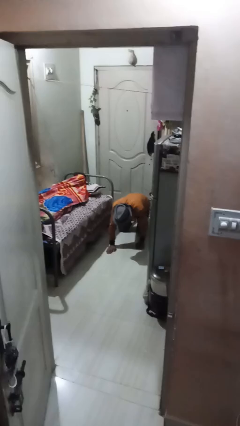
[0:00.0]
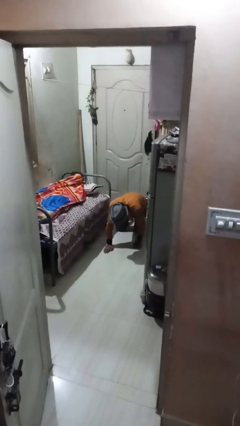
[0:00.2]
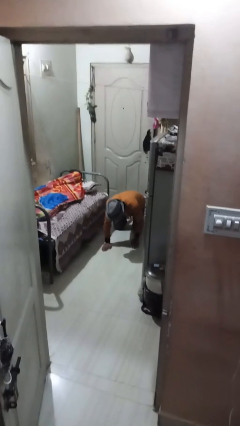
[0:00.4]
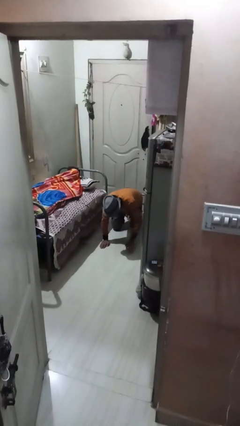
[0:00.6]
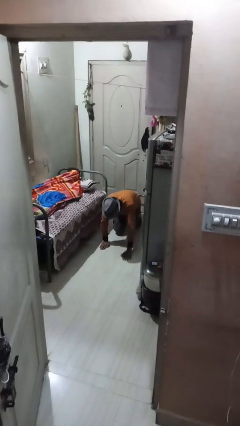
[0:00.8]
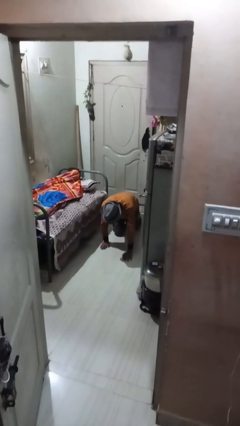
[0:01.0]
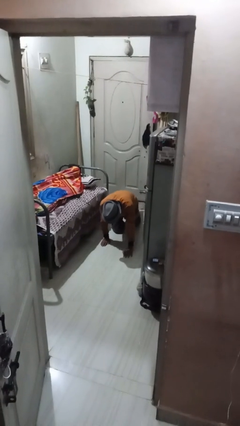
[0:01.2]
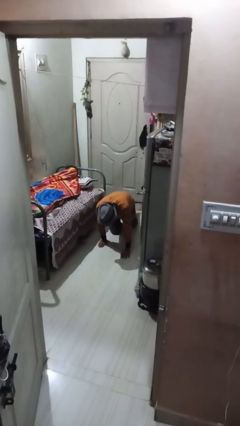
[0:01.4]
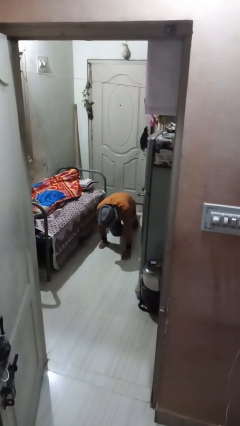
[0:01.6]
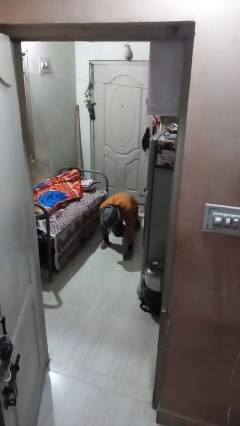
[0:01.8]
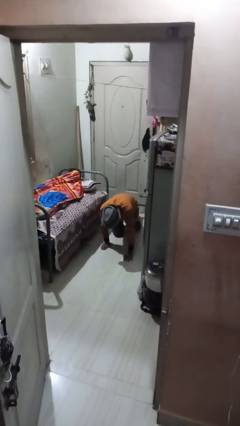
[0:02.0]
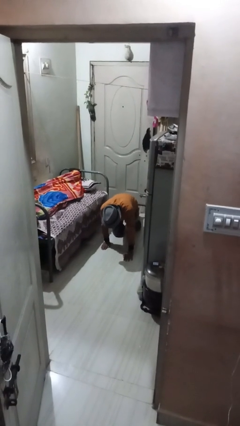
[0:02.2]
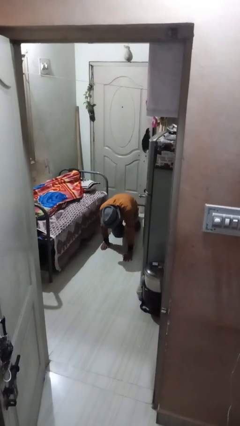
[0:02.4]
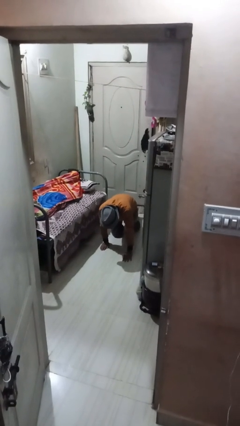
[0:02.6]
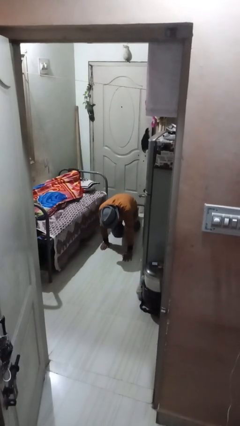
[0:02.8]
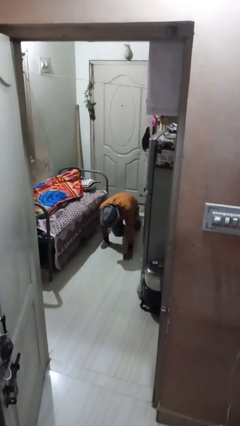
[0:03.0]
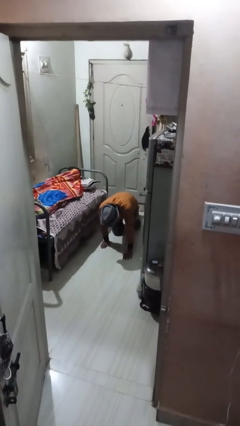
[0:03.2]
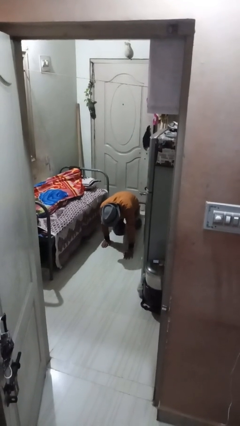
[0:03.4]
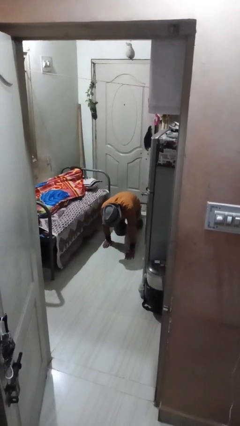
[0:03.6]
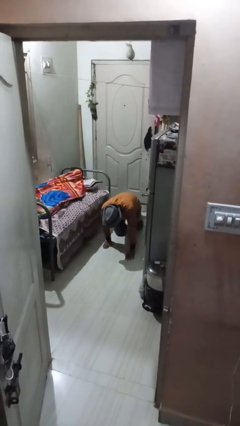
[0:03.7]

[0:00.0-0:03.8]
person crawls

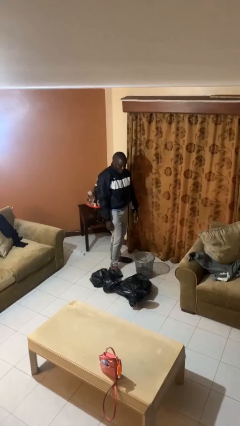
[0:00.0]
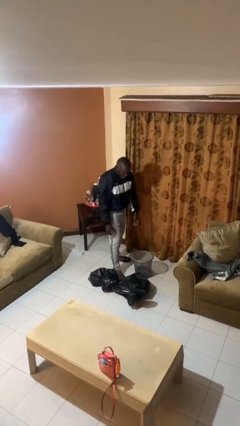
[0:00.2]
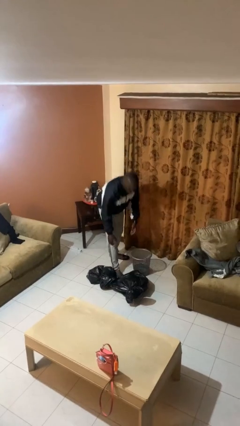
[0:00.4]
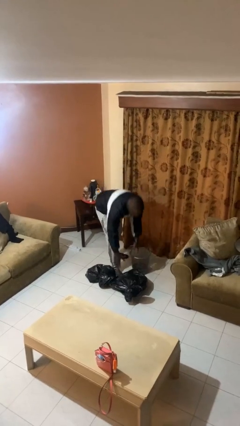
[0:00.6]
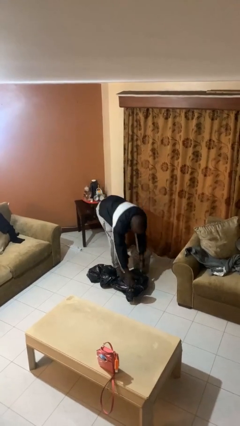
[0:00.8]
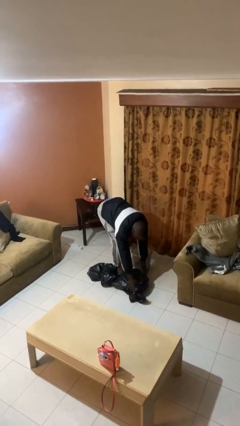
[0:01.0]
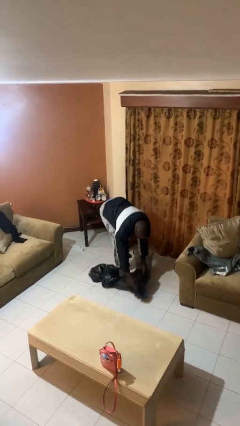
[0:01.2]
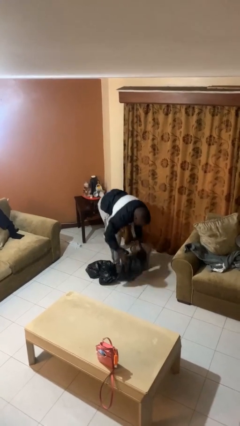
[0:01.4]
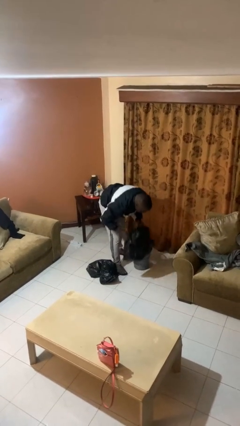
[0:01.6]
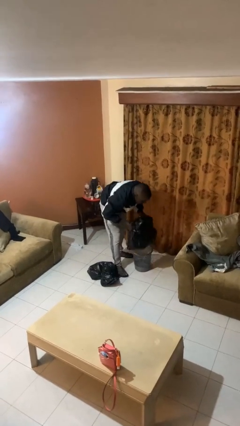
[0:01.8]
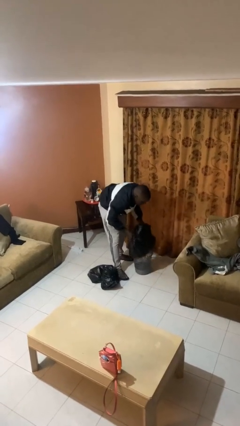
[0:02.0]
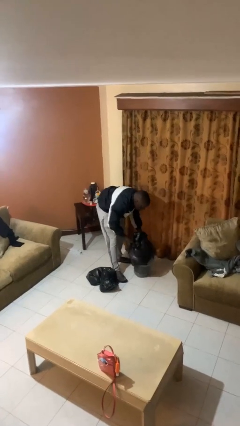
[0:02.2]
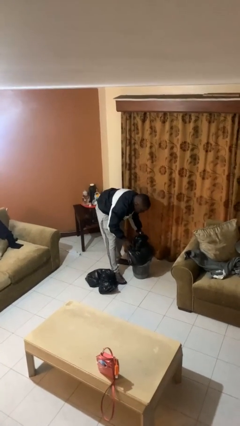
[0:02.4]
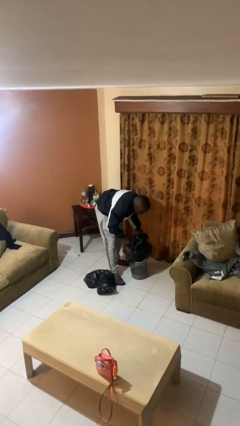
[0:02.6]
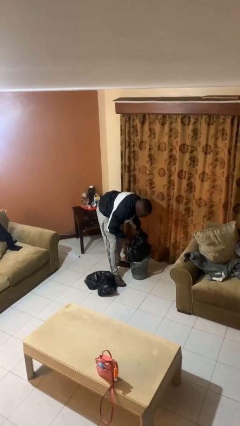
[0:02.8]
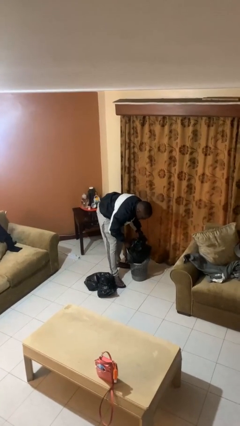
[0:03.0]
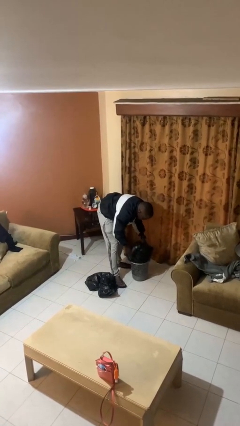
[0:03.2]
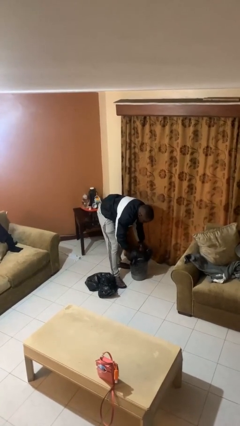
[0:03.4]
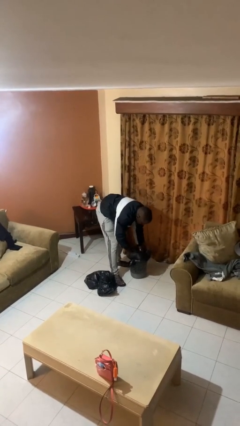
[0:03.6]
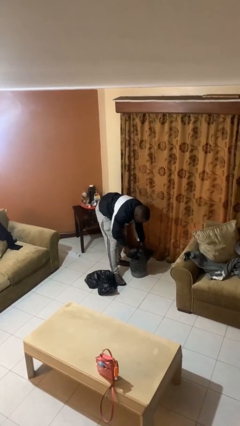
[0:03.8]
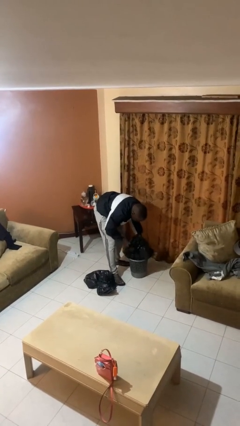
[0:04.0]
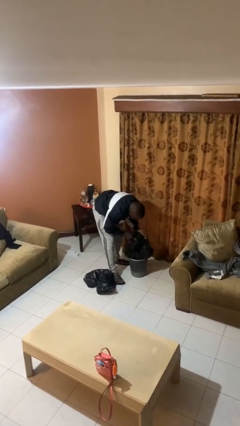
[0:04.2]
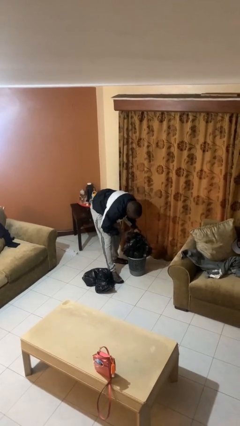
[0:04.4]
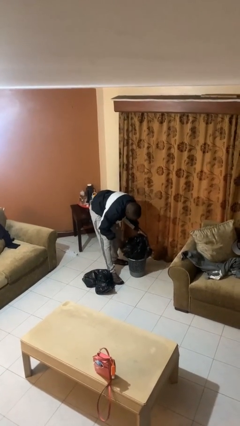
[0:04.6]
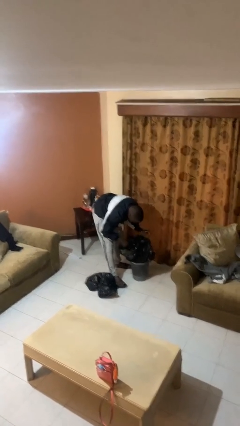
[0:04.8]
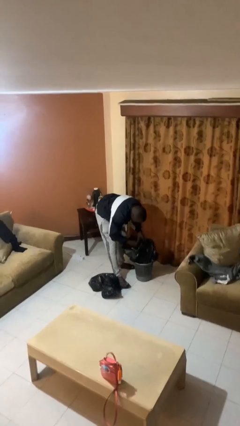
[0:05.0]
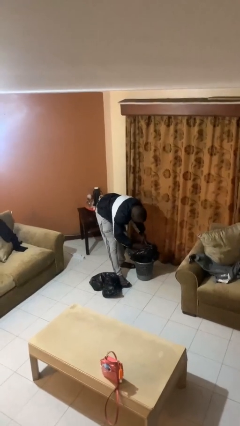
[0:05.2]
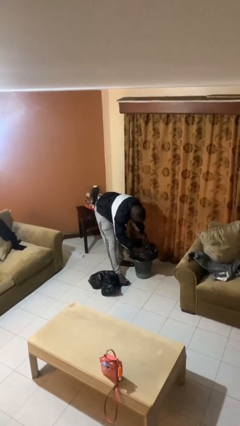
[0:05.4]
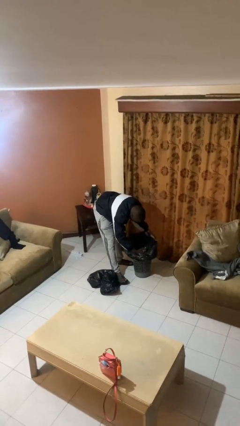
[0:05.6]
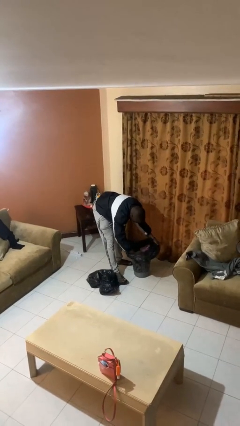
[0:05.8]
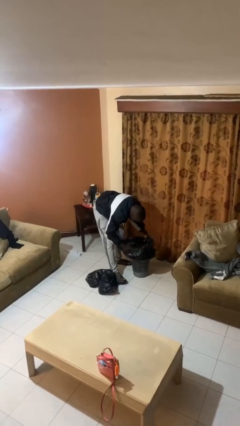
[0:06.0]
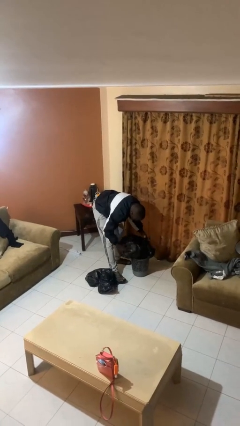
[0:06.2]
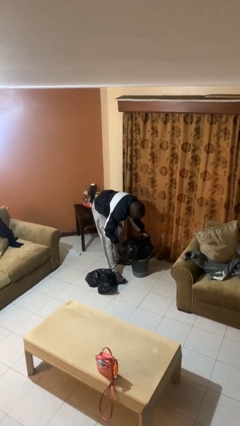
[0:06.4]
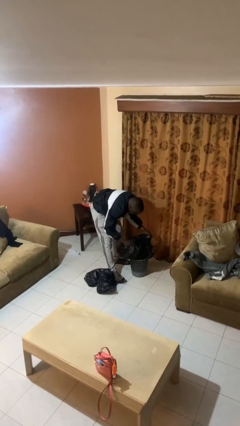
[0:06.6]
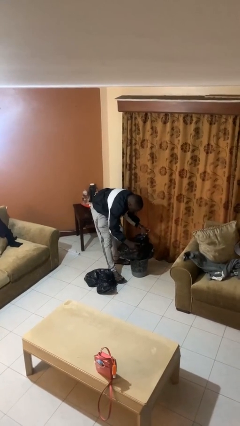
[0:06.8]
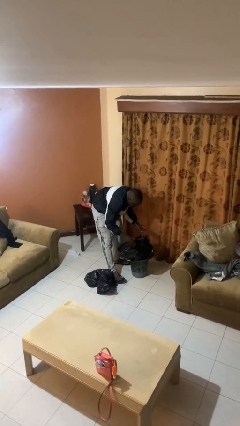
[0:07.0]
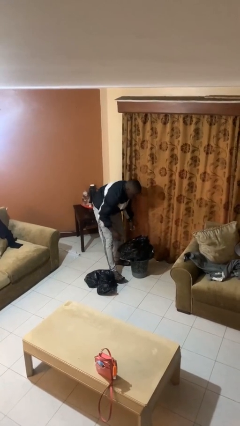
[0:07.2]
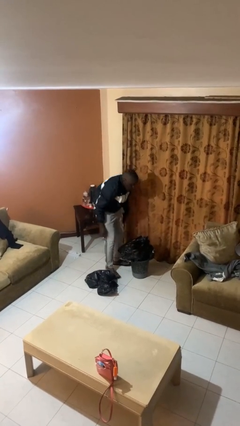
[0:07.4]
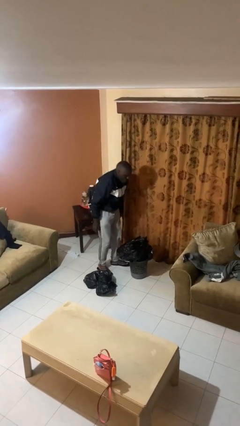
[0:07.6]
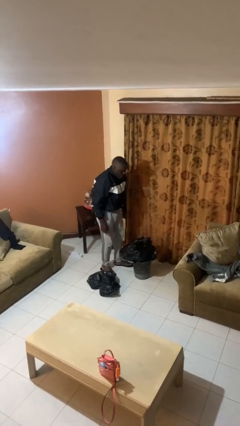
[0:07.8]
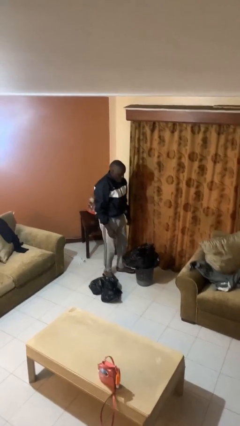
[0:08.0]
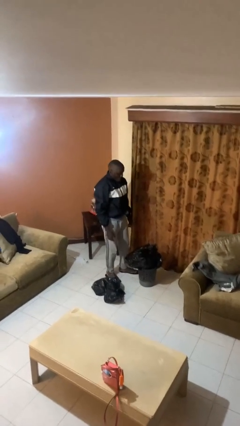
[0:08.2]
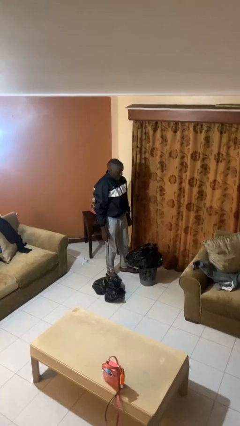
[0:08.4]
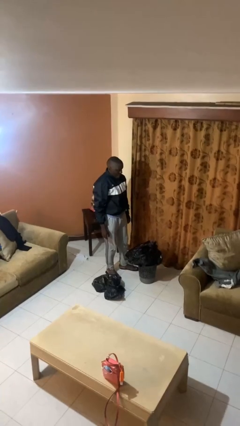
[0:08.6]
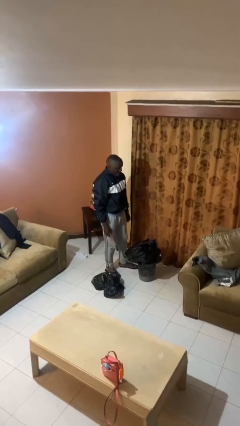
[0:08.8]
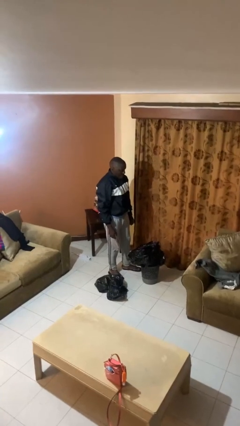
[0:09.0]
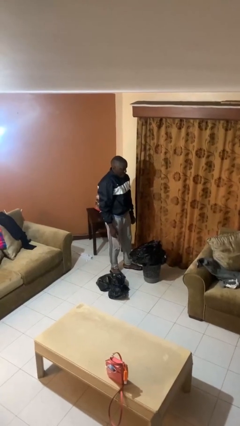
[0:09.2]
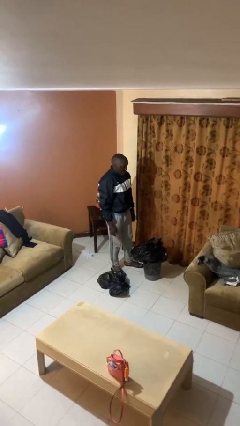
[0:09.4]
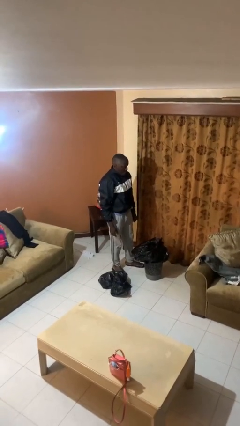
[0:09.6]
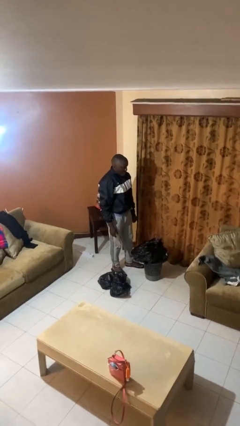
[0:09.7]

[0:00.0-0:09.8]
person inserts trashbag into trashcan

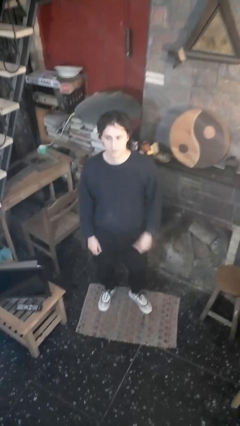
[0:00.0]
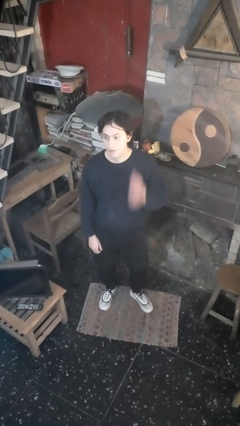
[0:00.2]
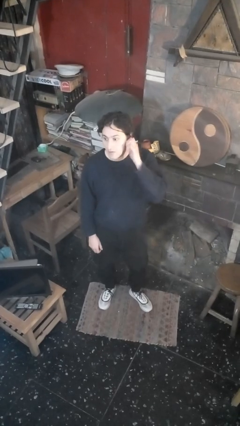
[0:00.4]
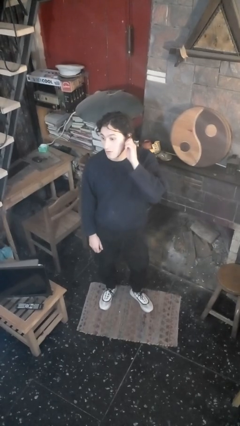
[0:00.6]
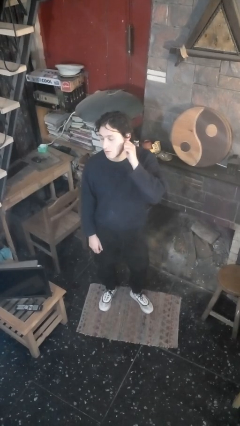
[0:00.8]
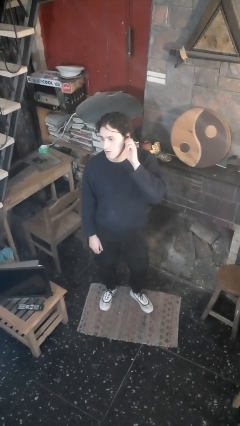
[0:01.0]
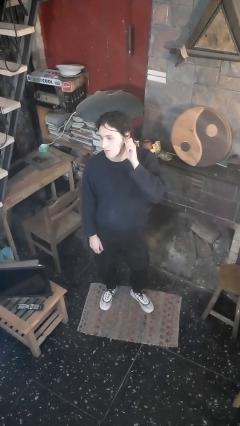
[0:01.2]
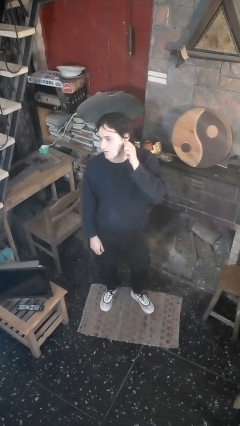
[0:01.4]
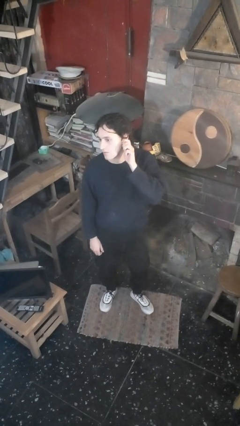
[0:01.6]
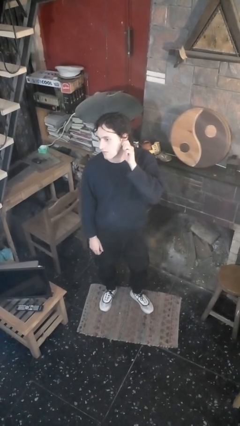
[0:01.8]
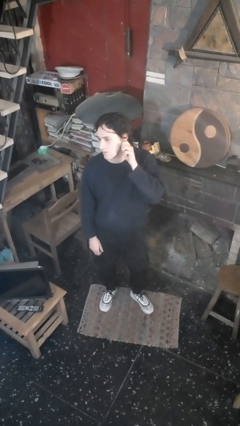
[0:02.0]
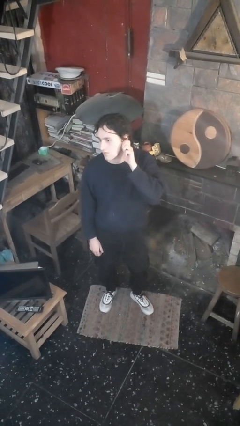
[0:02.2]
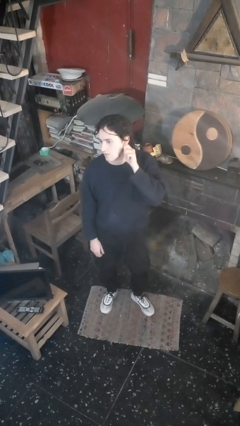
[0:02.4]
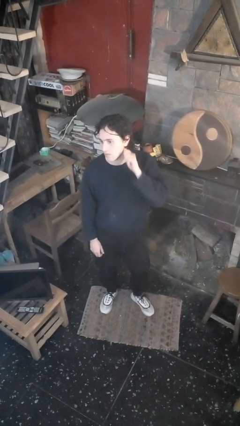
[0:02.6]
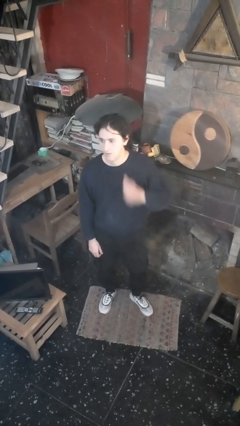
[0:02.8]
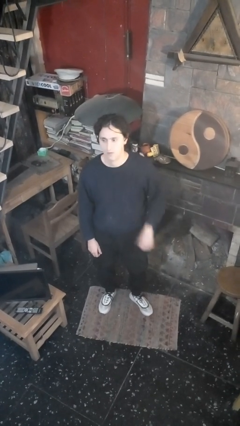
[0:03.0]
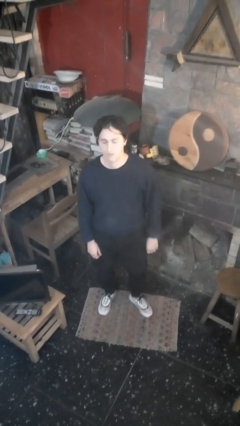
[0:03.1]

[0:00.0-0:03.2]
person touches earlobe

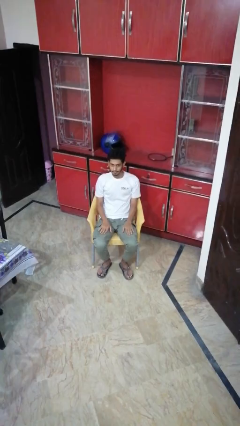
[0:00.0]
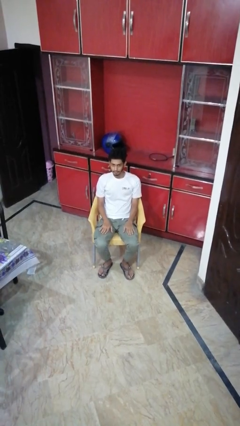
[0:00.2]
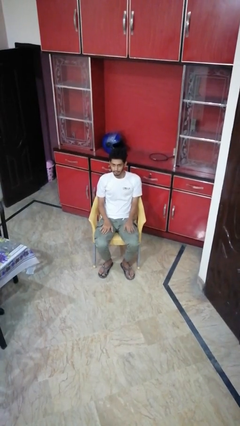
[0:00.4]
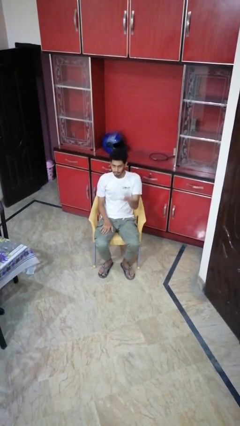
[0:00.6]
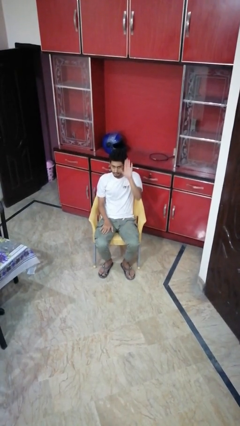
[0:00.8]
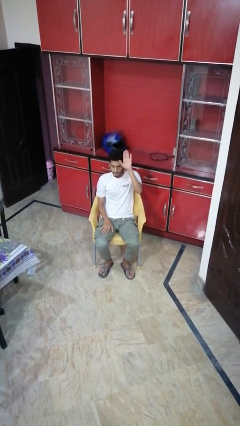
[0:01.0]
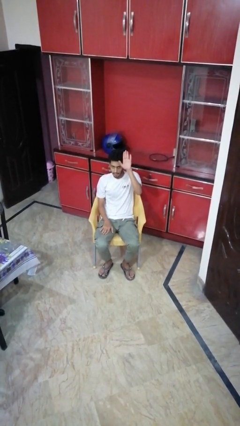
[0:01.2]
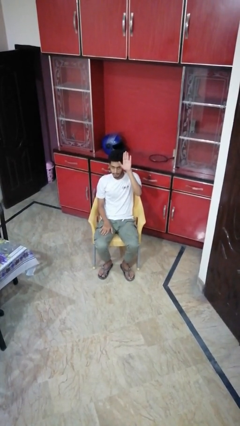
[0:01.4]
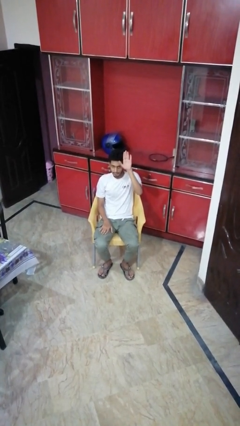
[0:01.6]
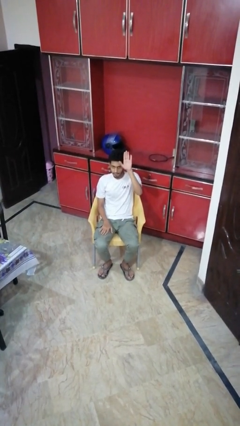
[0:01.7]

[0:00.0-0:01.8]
person gestures raise hand
